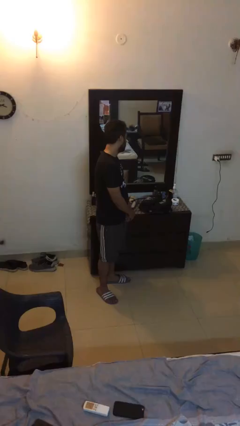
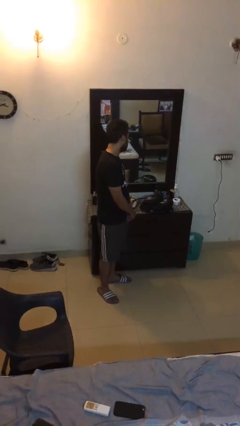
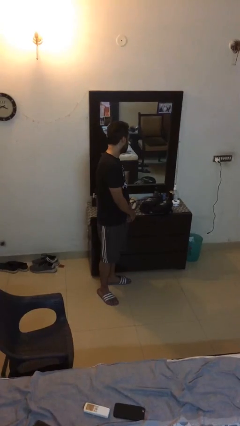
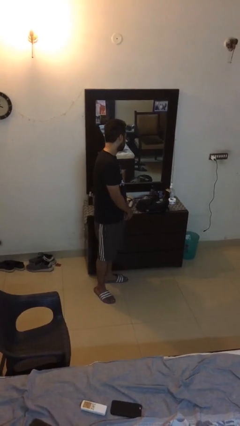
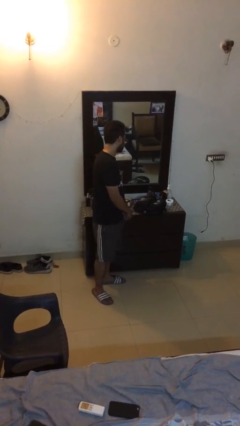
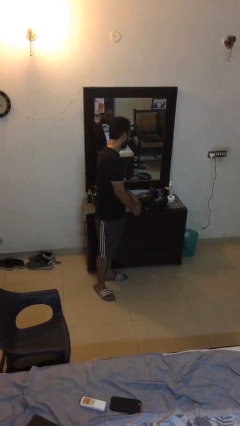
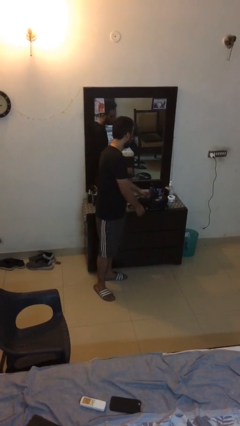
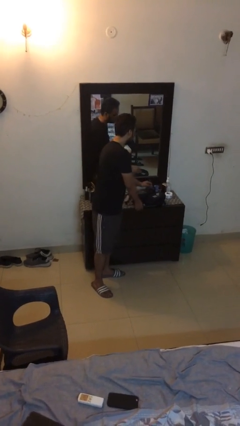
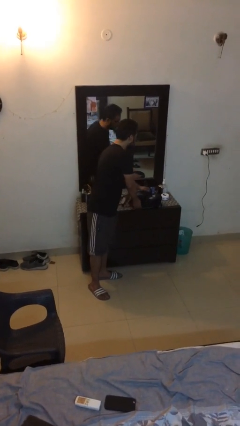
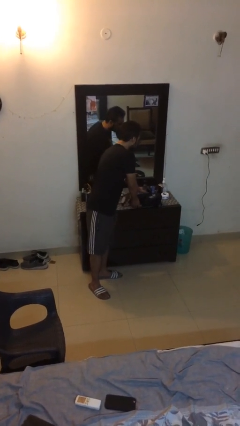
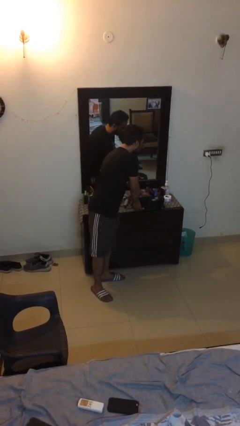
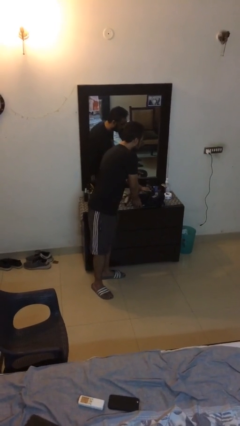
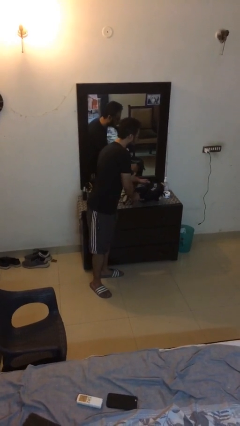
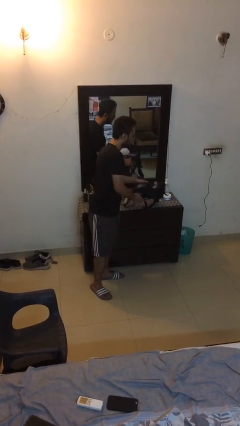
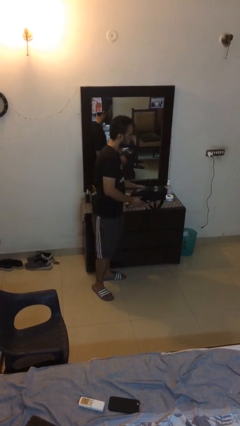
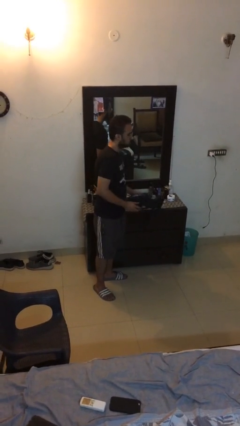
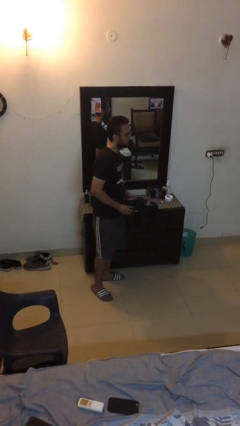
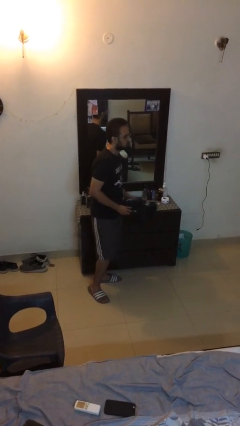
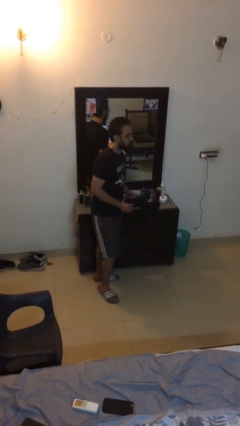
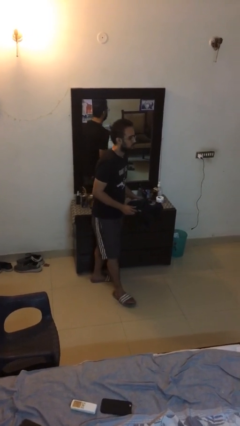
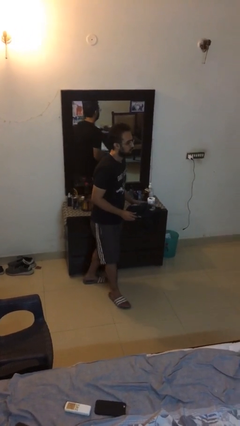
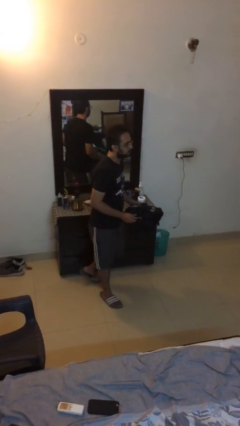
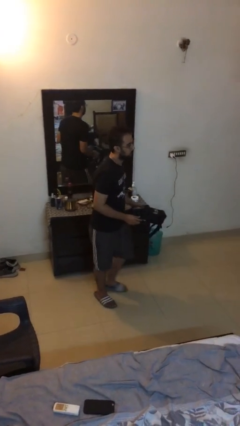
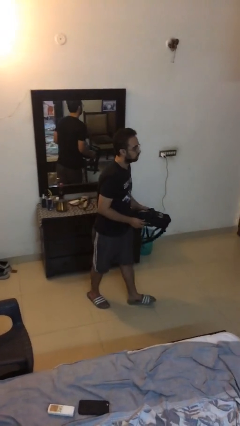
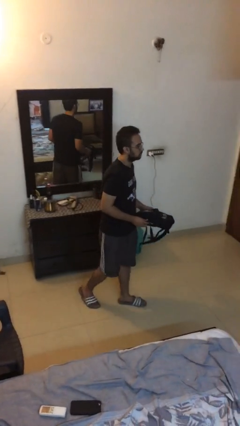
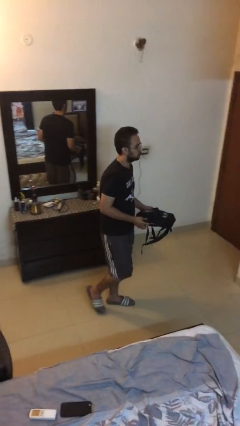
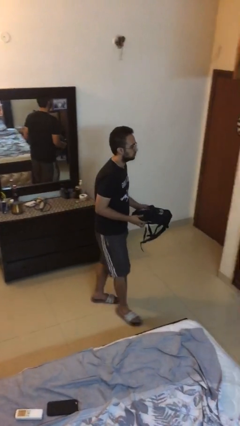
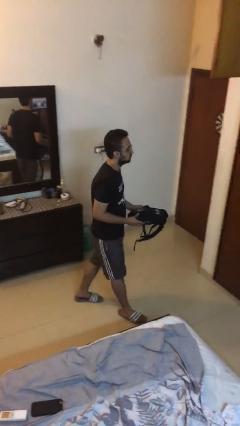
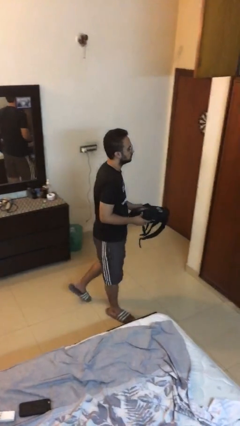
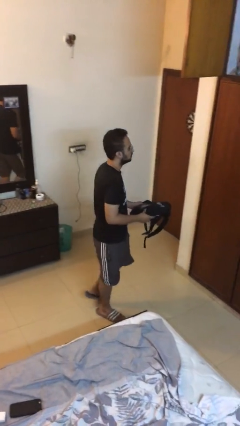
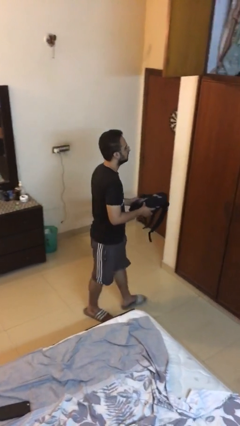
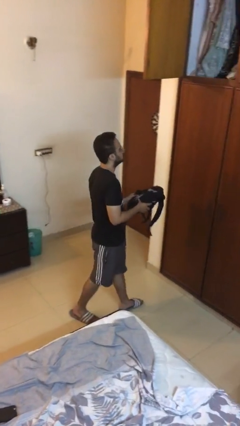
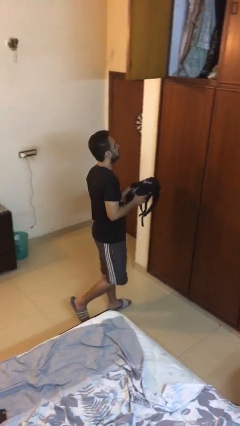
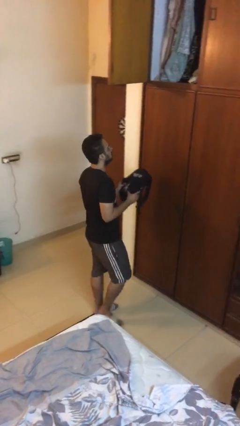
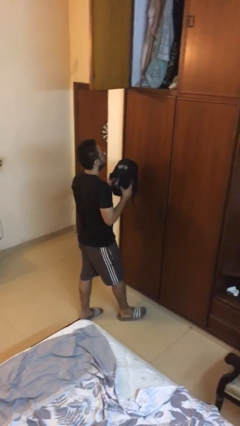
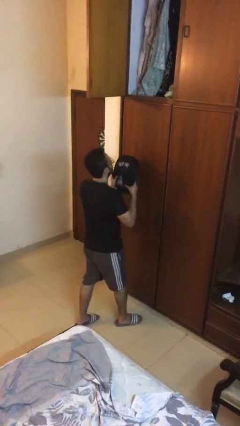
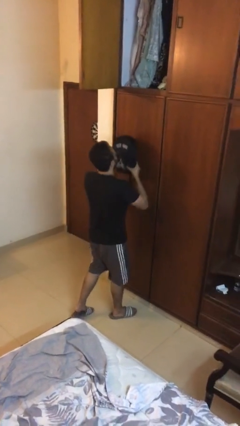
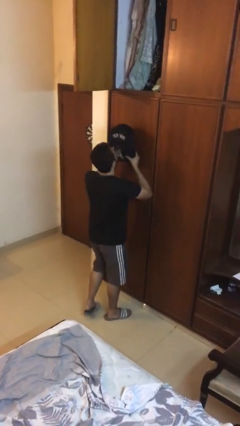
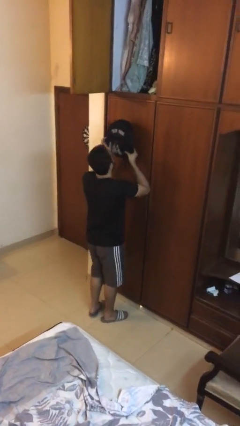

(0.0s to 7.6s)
person picks up object from table

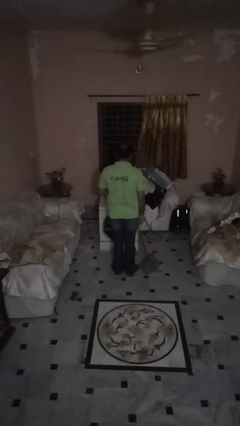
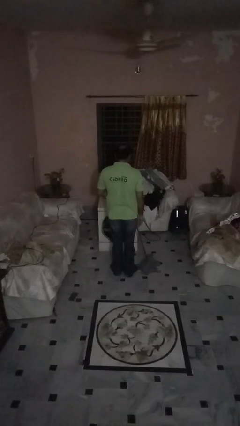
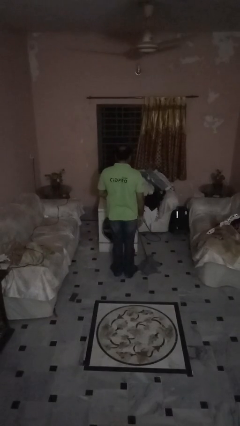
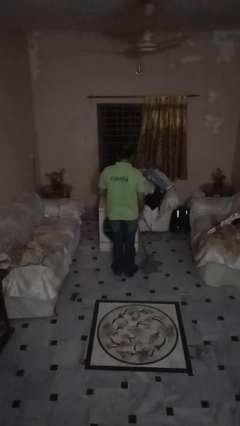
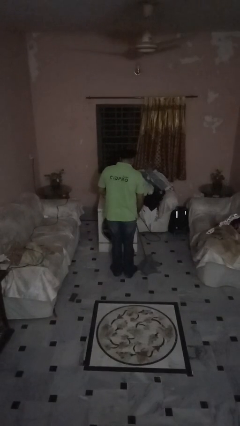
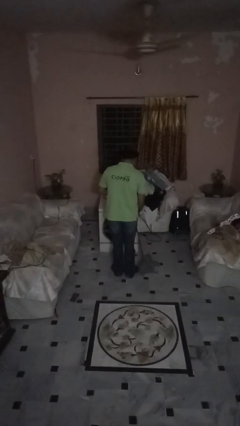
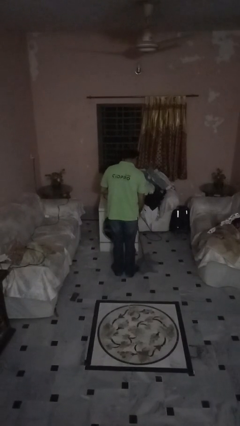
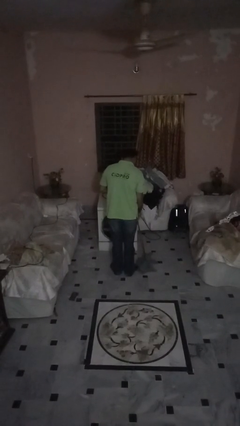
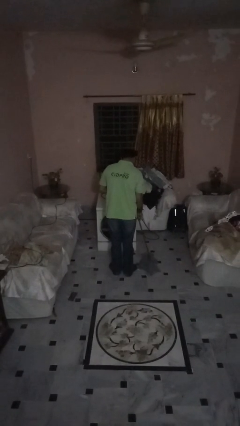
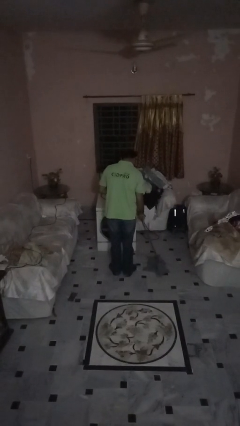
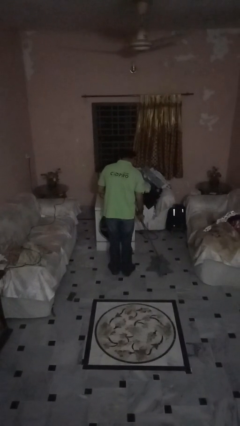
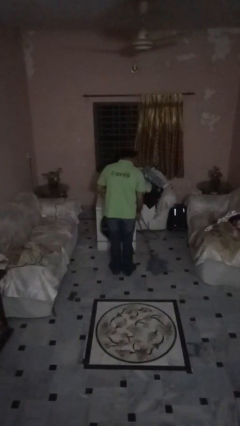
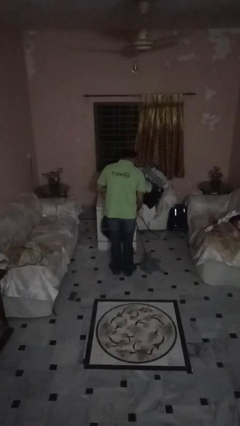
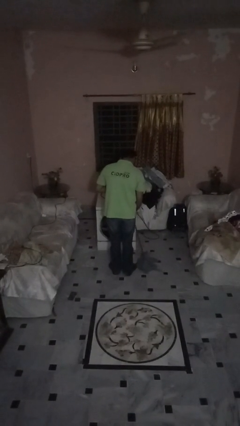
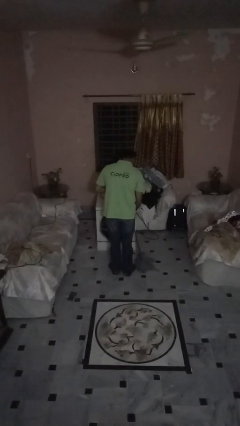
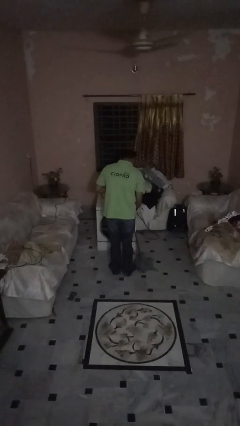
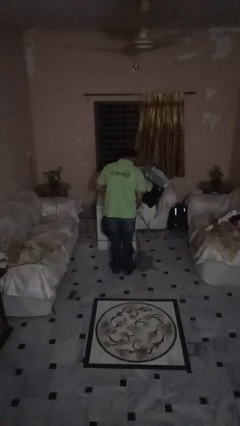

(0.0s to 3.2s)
person mops

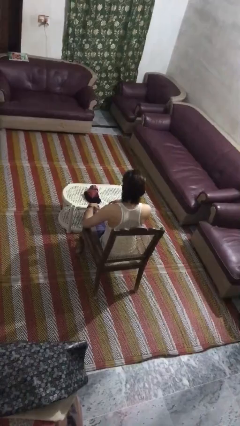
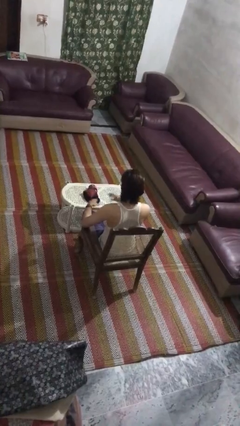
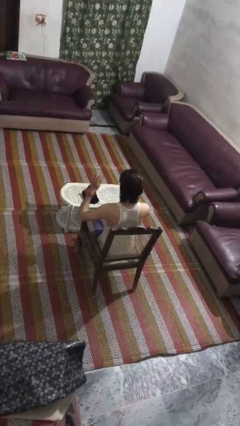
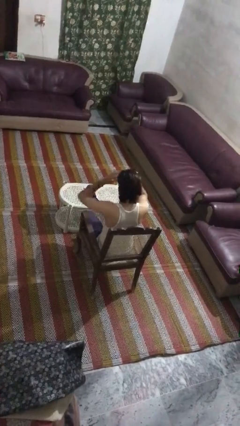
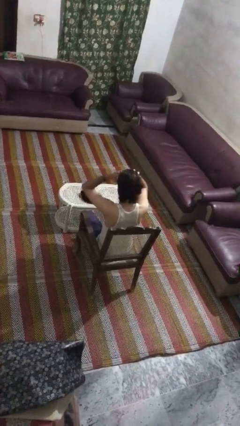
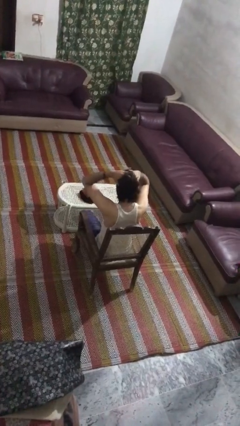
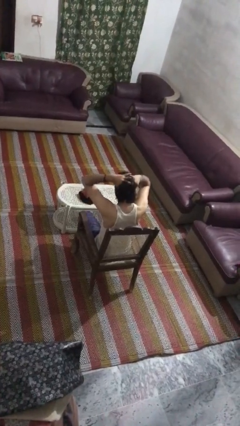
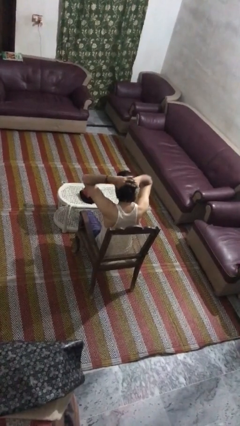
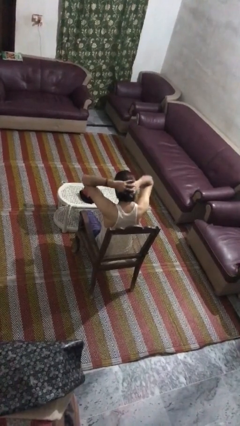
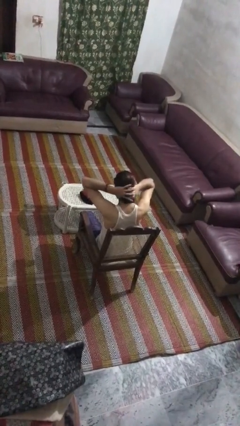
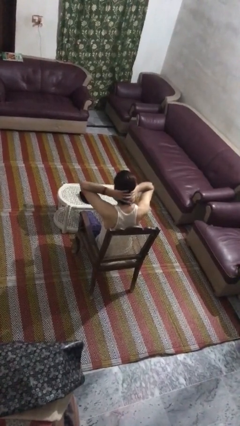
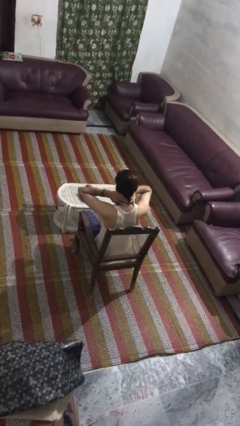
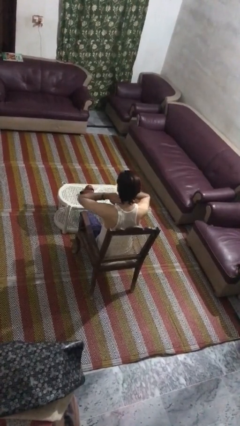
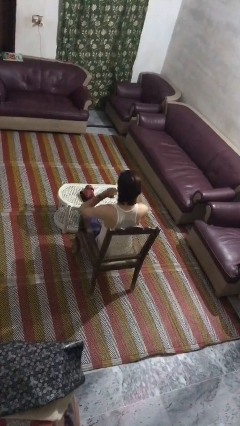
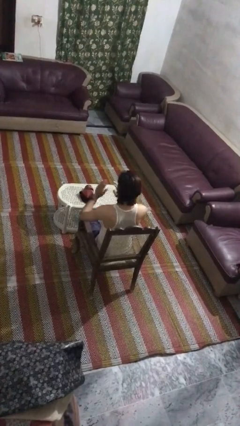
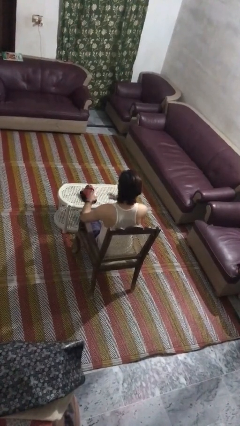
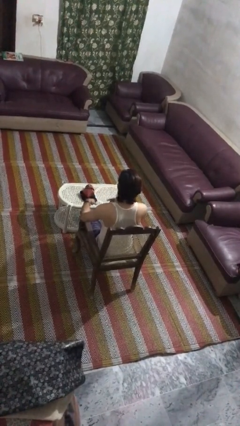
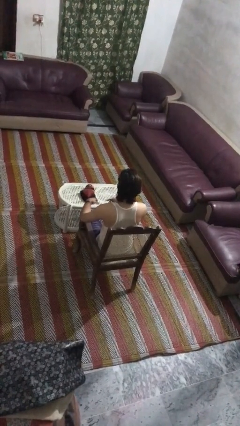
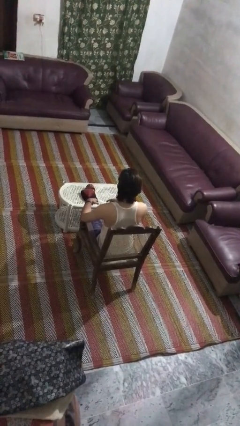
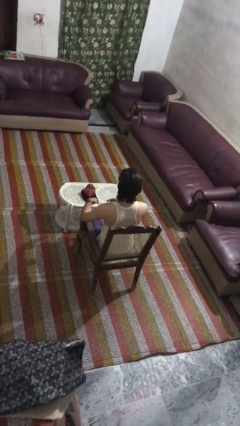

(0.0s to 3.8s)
person strokes hair

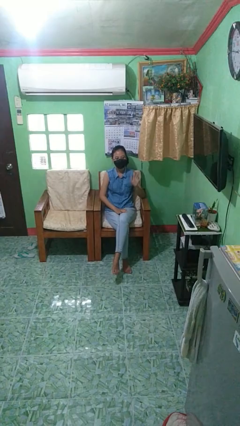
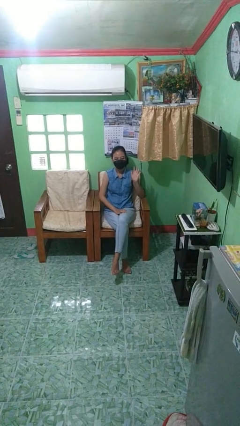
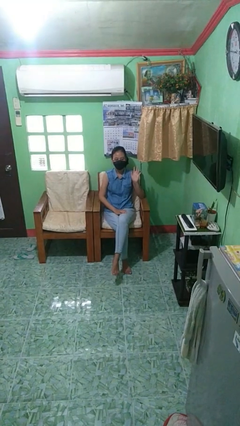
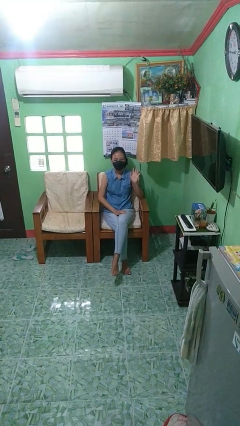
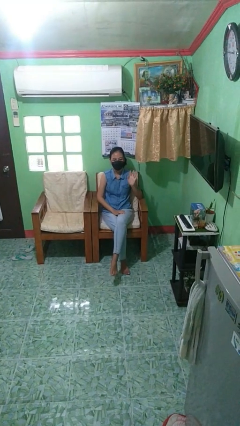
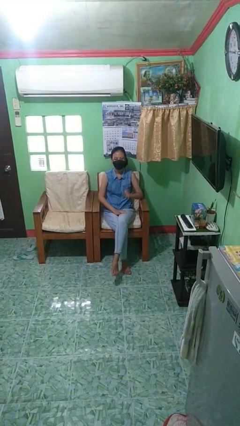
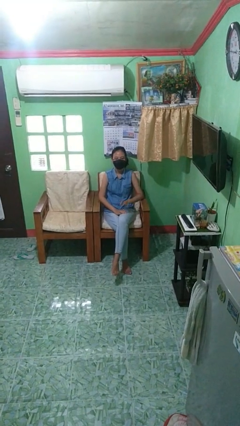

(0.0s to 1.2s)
person gestures number five

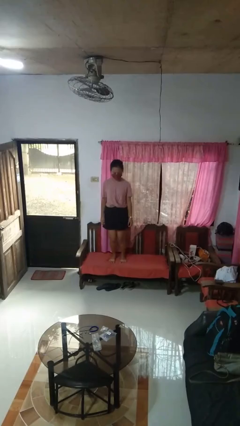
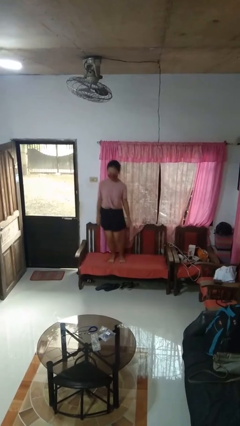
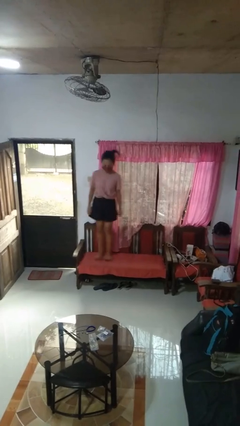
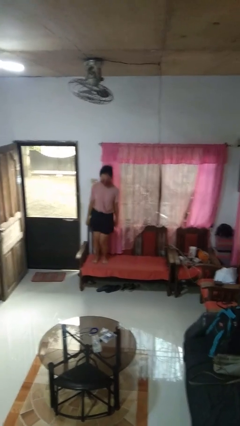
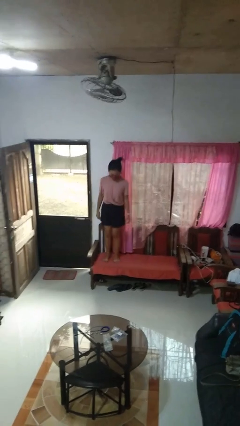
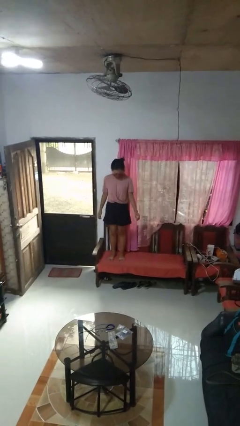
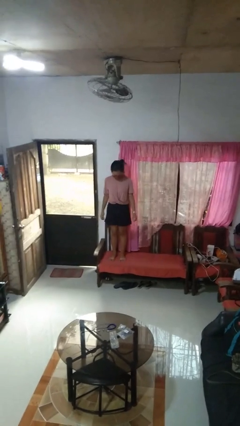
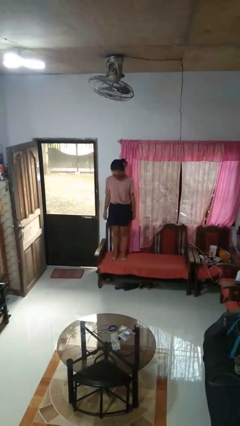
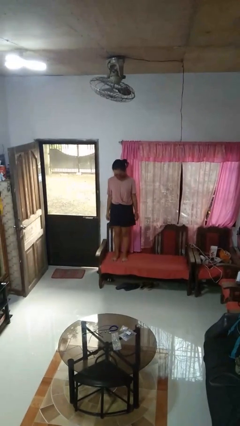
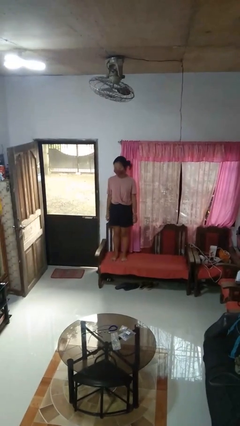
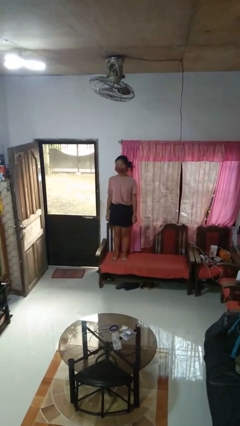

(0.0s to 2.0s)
person jumps on couch
